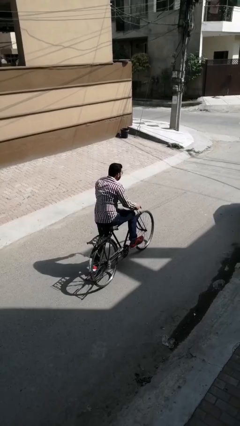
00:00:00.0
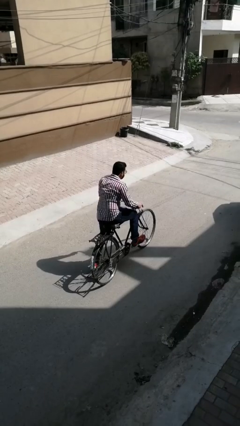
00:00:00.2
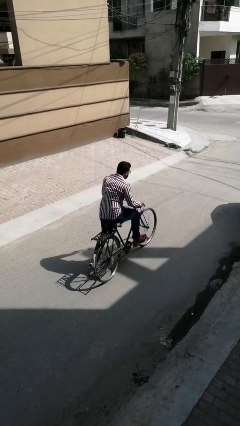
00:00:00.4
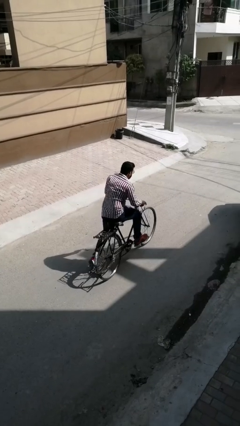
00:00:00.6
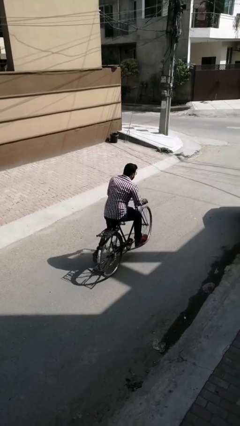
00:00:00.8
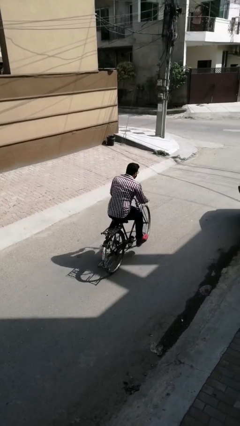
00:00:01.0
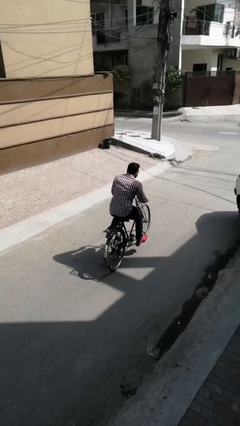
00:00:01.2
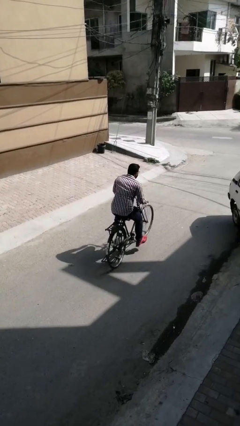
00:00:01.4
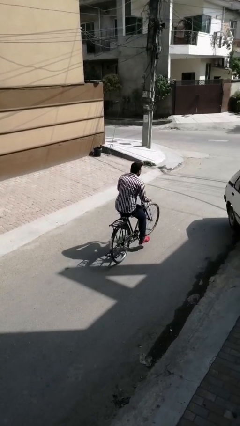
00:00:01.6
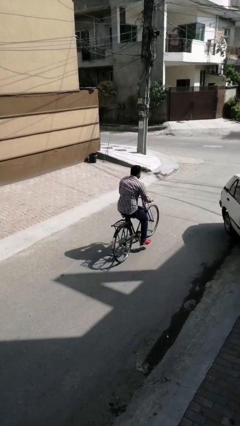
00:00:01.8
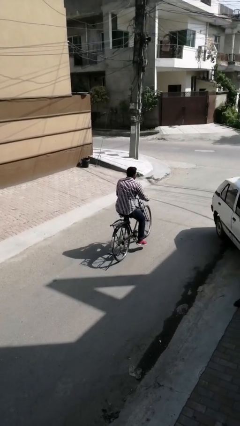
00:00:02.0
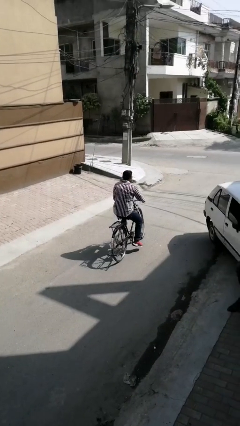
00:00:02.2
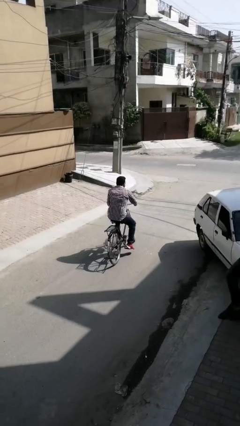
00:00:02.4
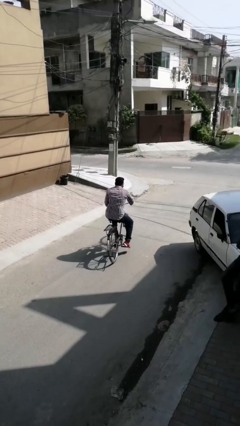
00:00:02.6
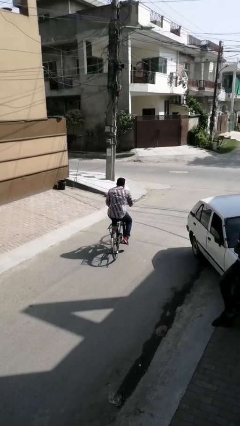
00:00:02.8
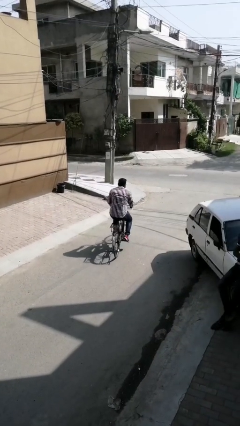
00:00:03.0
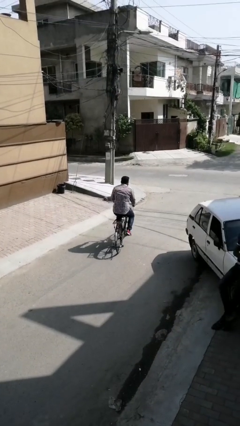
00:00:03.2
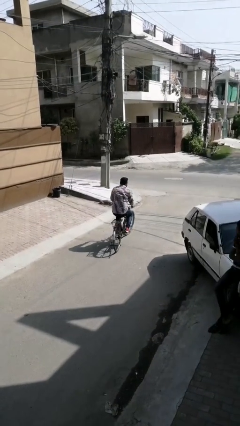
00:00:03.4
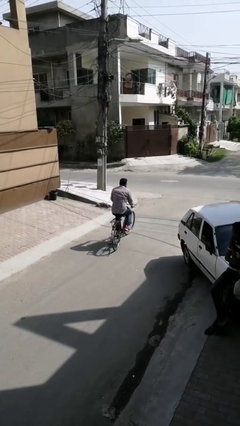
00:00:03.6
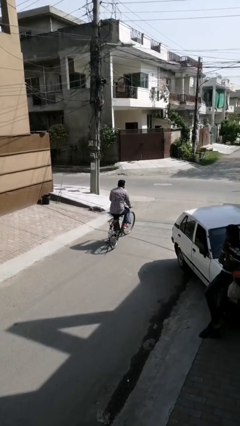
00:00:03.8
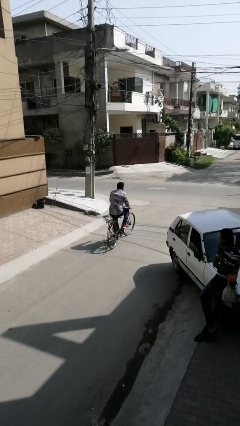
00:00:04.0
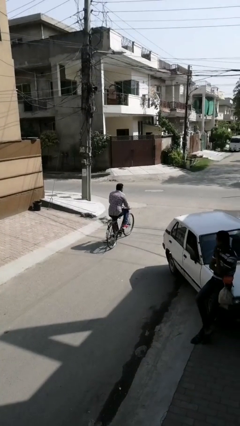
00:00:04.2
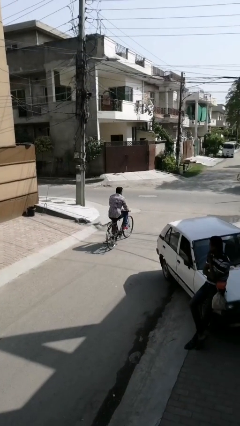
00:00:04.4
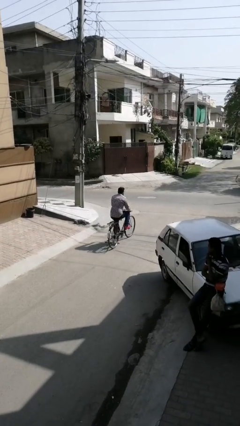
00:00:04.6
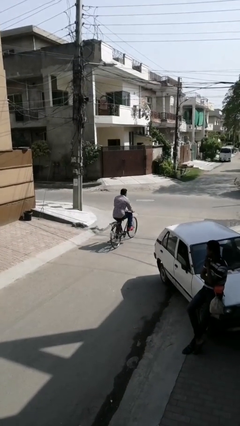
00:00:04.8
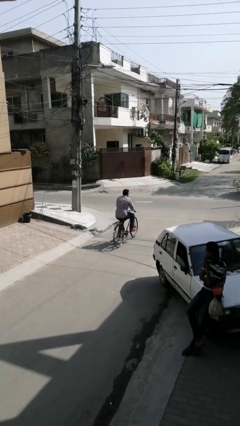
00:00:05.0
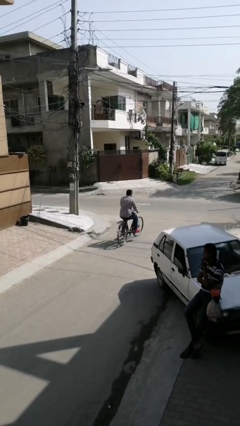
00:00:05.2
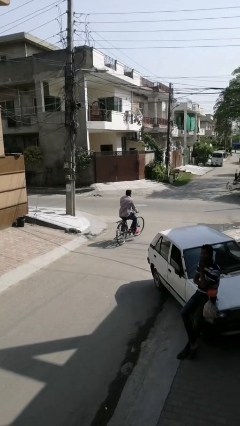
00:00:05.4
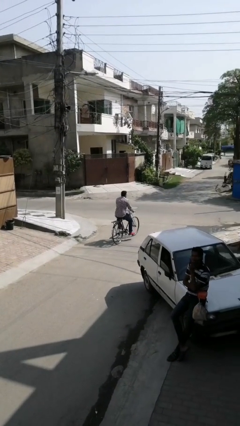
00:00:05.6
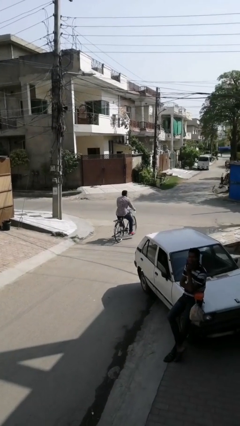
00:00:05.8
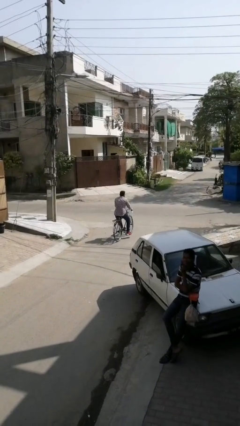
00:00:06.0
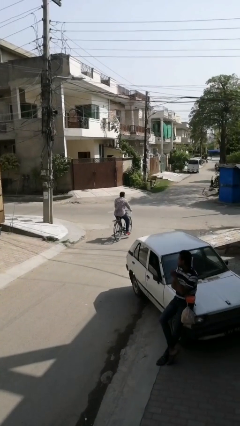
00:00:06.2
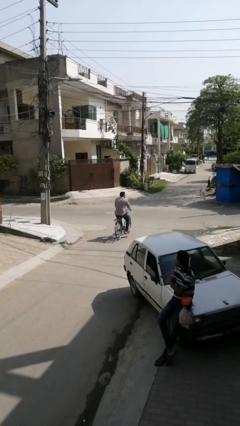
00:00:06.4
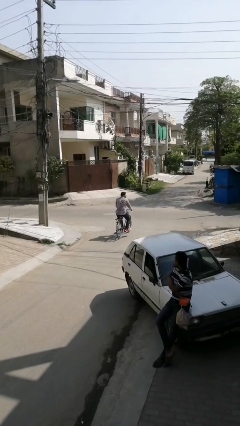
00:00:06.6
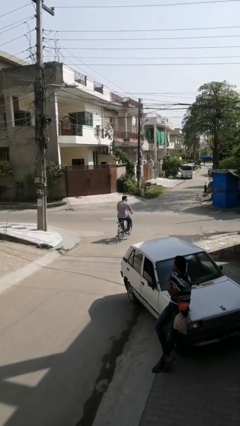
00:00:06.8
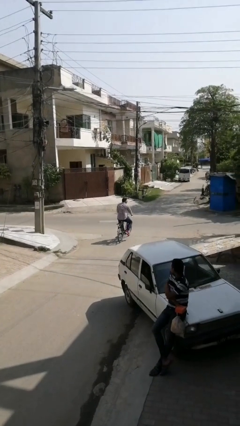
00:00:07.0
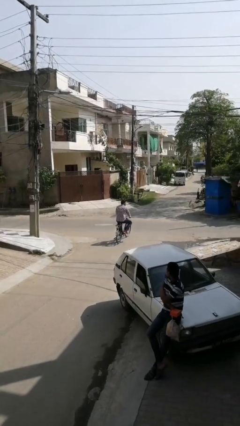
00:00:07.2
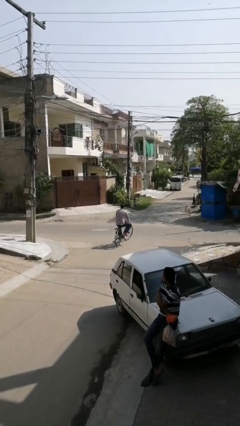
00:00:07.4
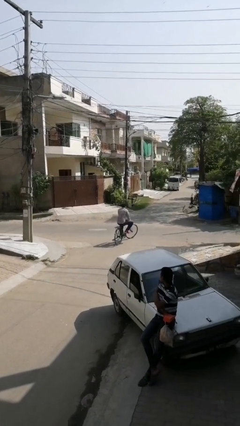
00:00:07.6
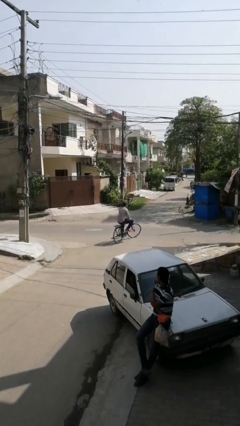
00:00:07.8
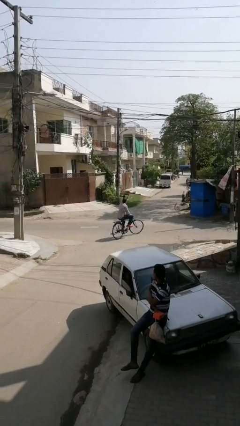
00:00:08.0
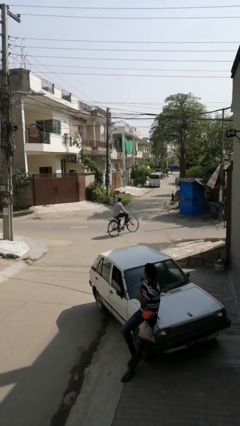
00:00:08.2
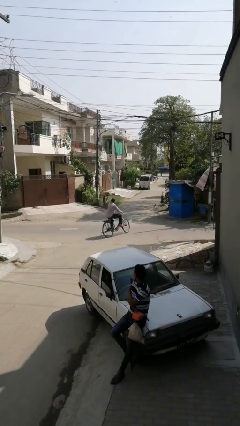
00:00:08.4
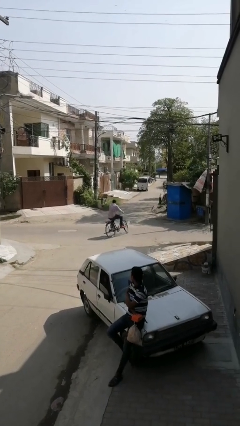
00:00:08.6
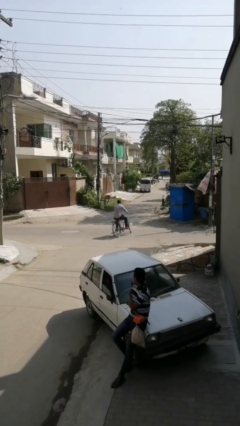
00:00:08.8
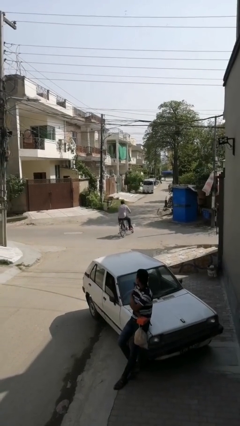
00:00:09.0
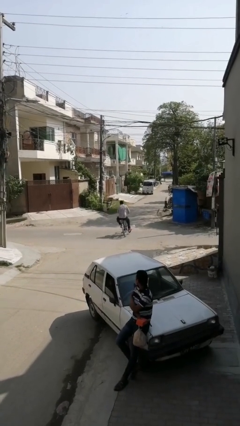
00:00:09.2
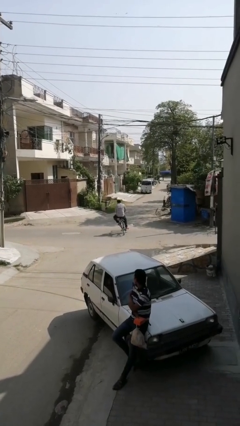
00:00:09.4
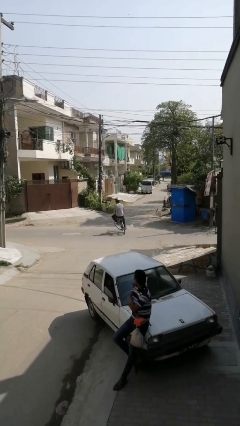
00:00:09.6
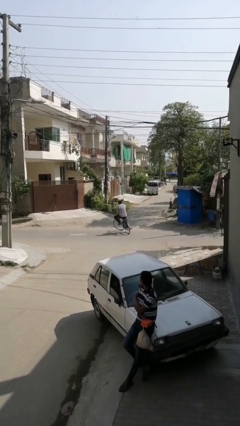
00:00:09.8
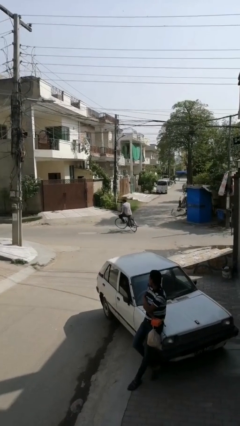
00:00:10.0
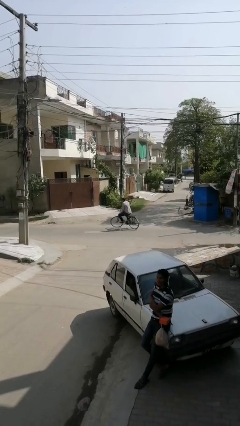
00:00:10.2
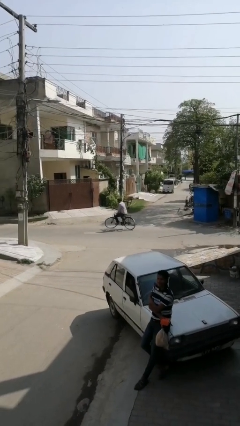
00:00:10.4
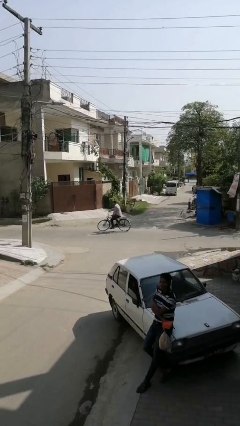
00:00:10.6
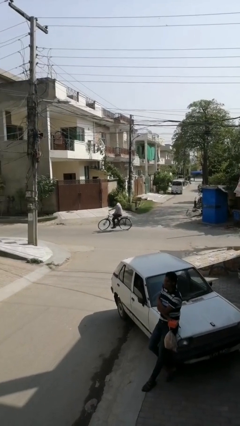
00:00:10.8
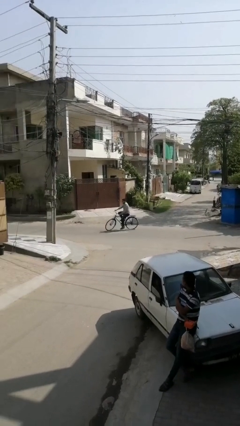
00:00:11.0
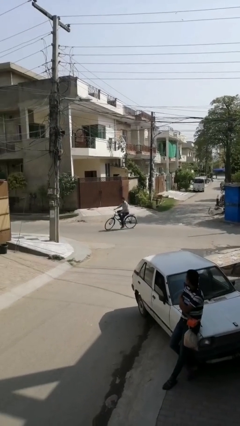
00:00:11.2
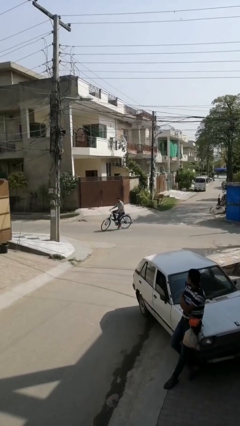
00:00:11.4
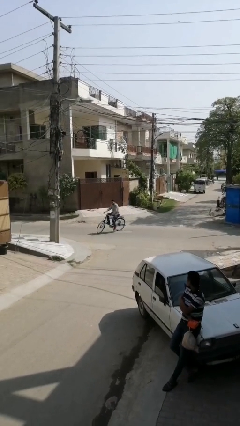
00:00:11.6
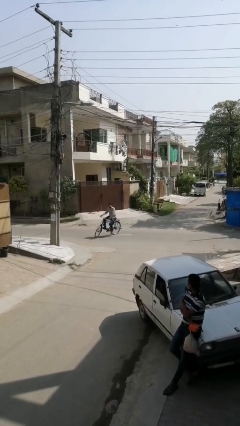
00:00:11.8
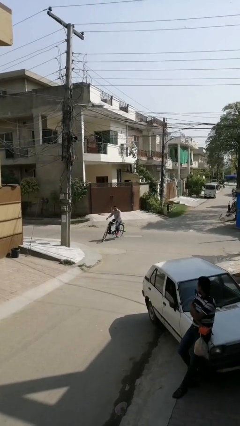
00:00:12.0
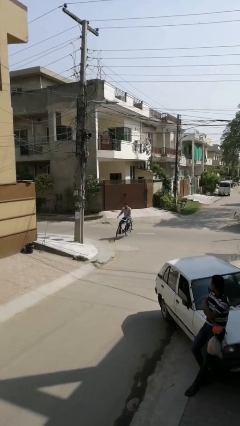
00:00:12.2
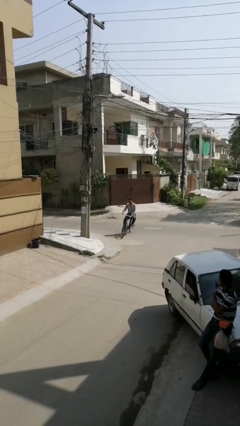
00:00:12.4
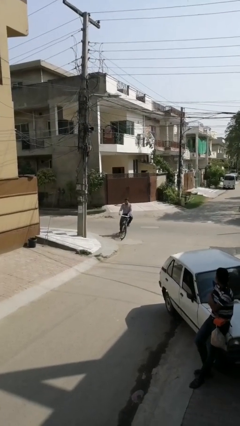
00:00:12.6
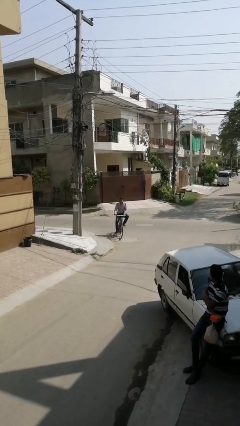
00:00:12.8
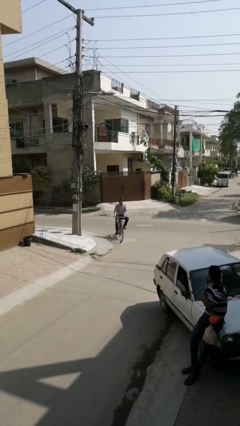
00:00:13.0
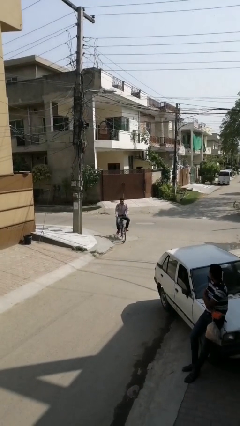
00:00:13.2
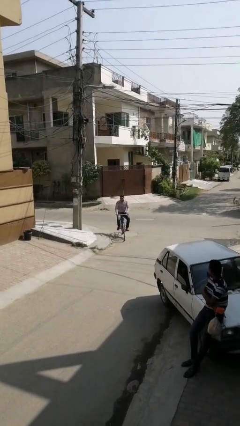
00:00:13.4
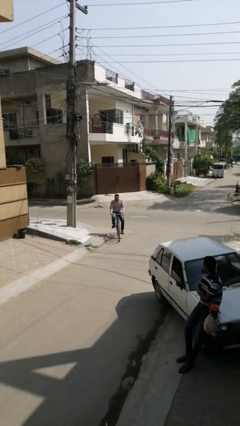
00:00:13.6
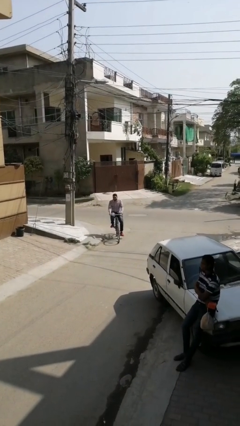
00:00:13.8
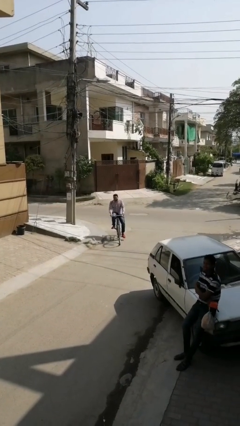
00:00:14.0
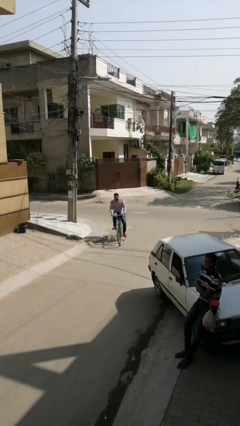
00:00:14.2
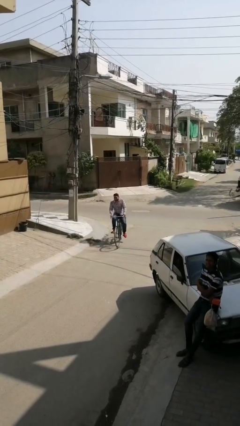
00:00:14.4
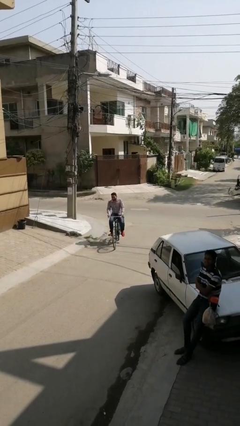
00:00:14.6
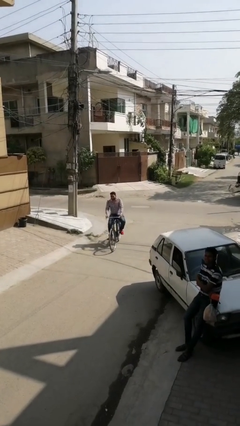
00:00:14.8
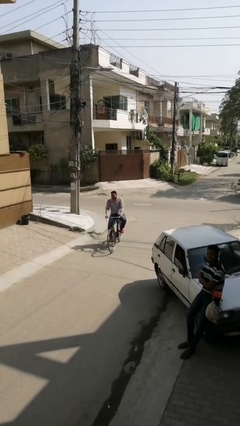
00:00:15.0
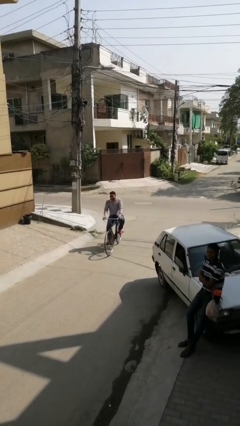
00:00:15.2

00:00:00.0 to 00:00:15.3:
person rides bicycle

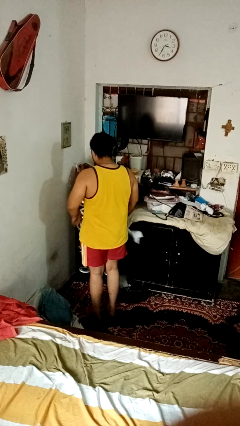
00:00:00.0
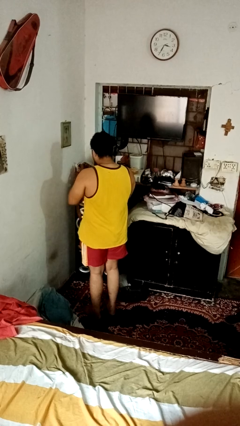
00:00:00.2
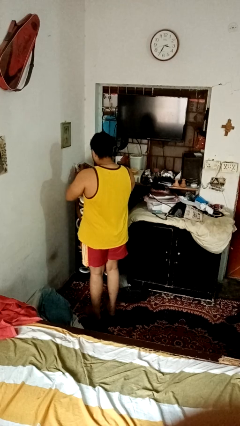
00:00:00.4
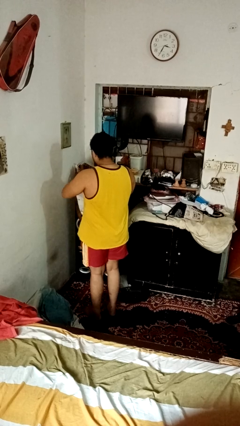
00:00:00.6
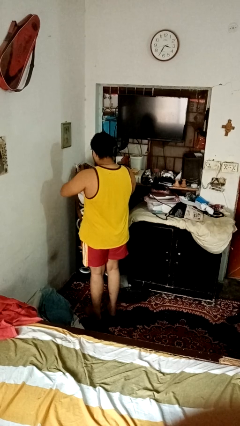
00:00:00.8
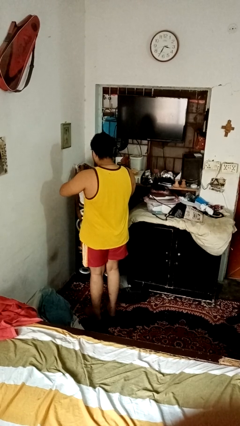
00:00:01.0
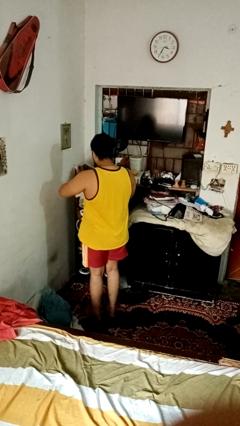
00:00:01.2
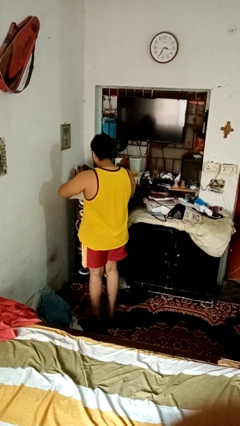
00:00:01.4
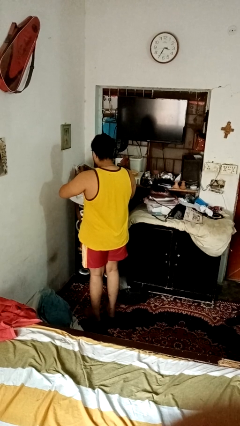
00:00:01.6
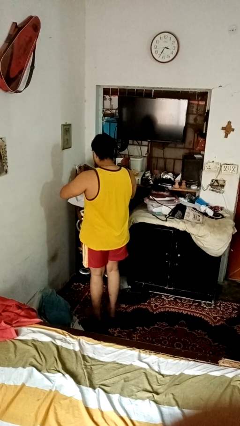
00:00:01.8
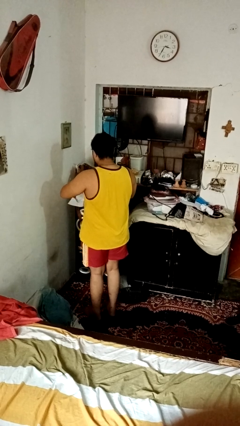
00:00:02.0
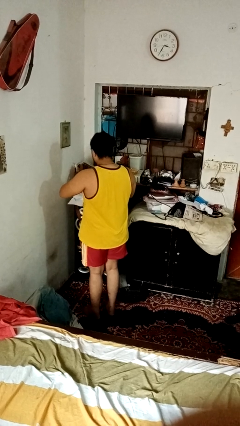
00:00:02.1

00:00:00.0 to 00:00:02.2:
person tears paper

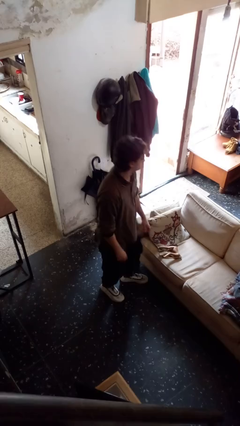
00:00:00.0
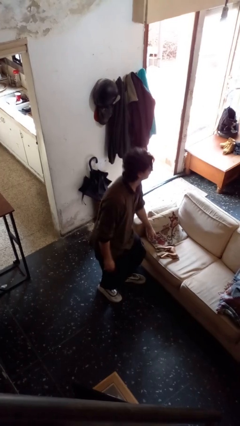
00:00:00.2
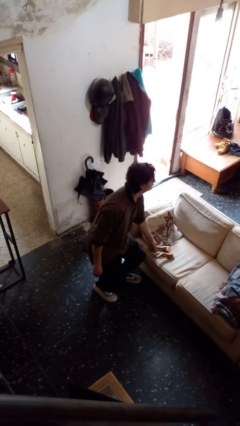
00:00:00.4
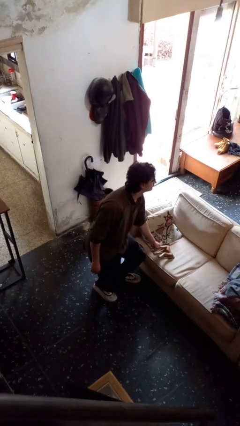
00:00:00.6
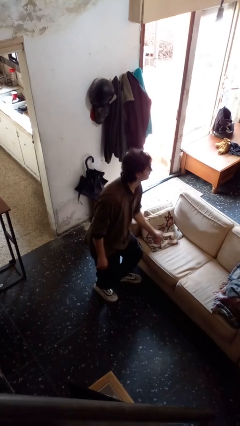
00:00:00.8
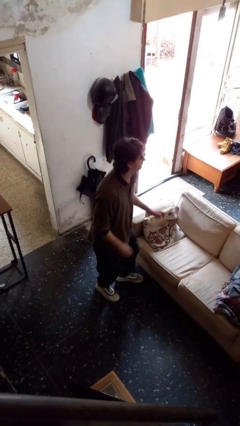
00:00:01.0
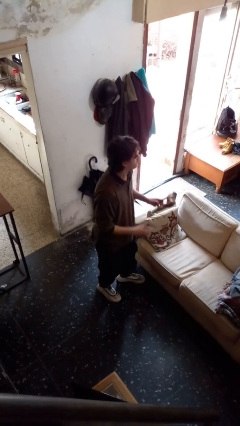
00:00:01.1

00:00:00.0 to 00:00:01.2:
person picks up object from couch
